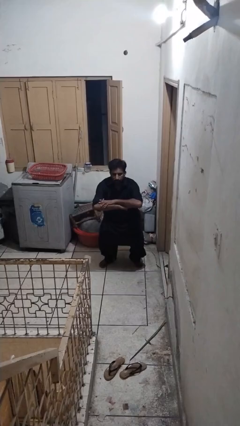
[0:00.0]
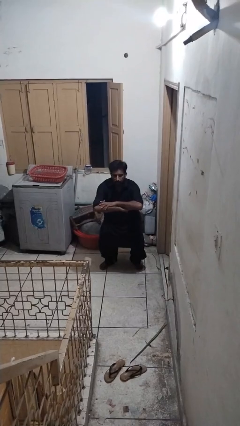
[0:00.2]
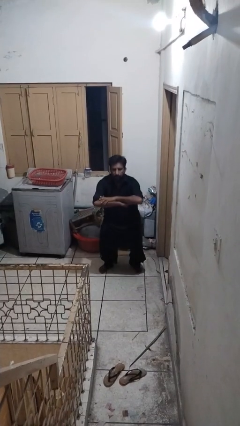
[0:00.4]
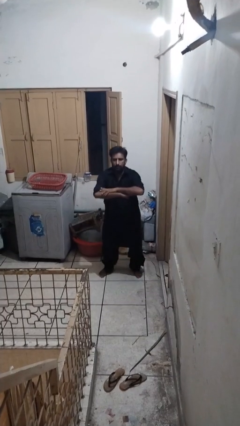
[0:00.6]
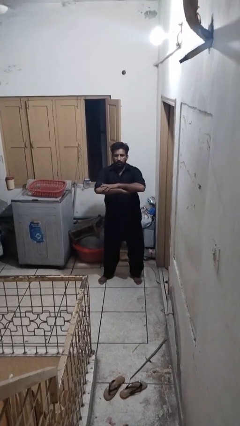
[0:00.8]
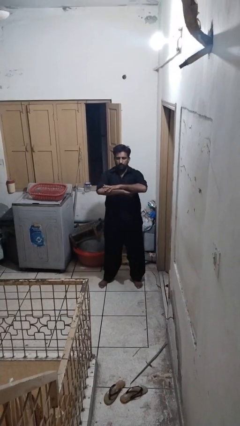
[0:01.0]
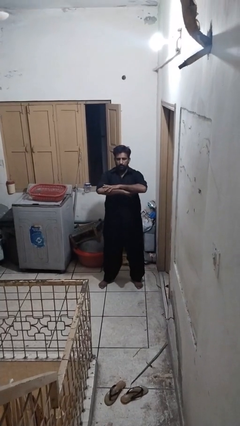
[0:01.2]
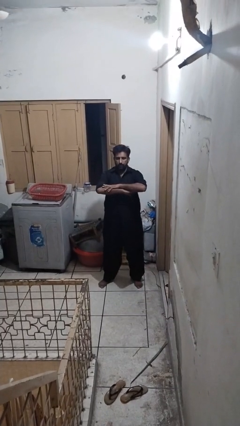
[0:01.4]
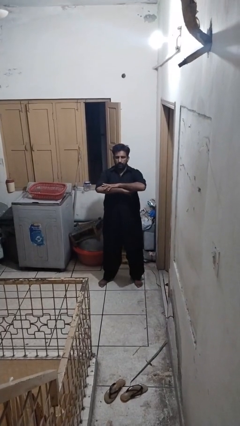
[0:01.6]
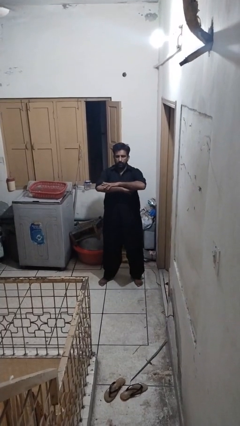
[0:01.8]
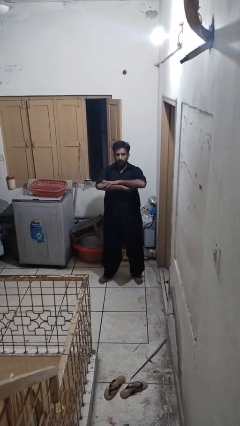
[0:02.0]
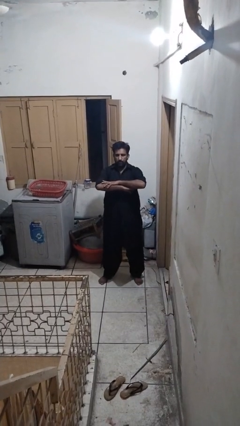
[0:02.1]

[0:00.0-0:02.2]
person stands up

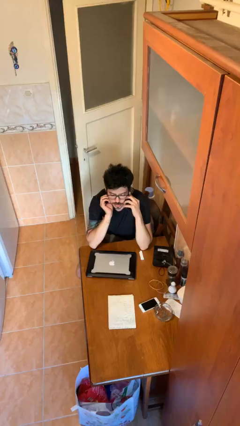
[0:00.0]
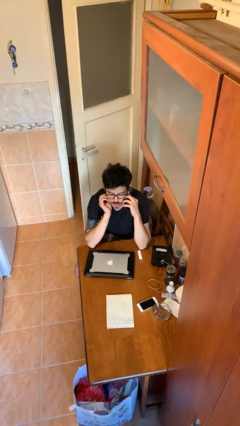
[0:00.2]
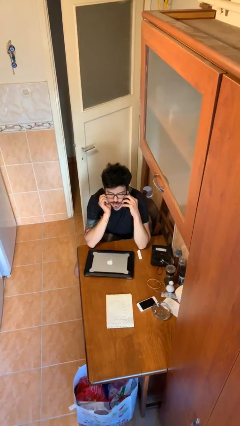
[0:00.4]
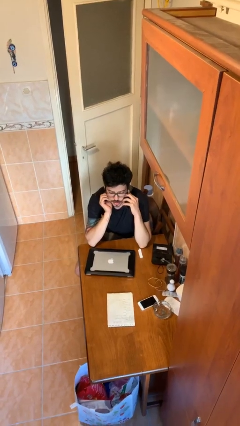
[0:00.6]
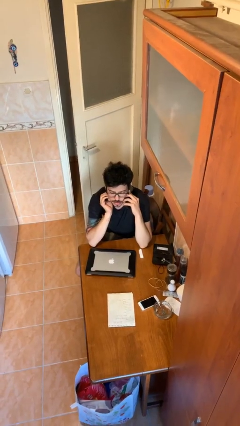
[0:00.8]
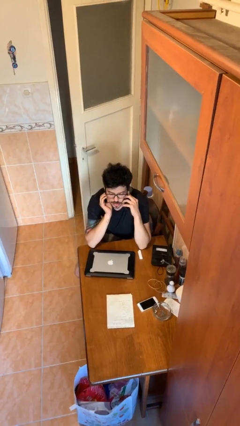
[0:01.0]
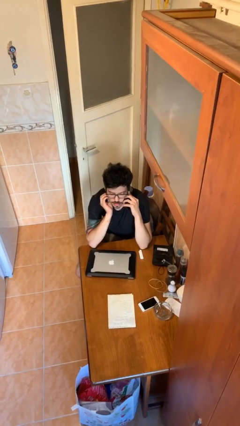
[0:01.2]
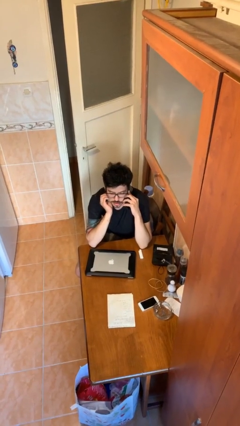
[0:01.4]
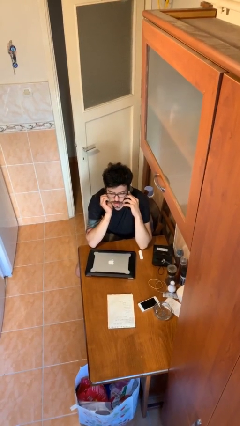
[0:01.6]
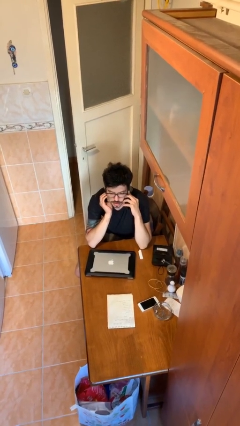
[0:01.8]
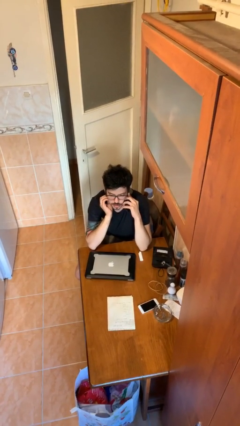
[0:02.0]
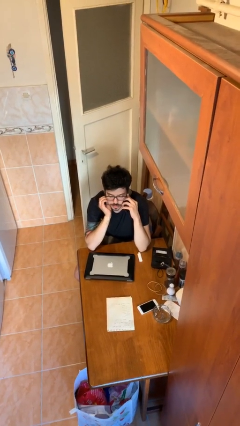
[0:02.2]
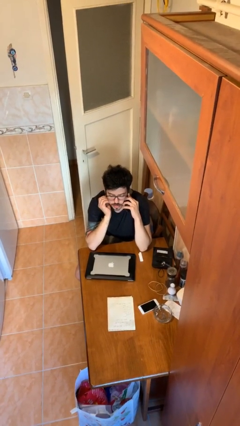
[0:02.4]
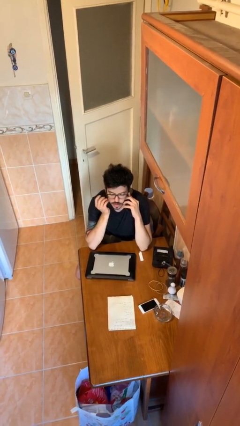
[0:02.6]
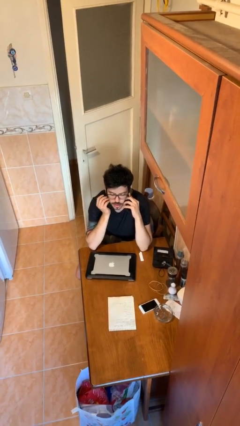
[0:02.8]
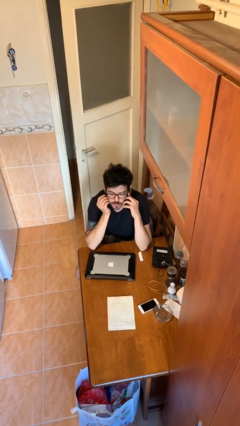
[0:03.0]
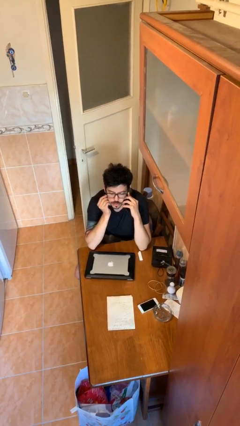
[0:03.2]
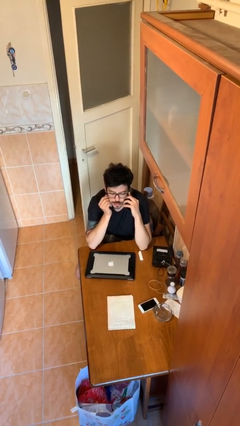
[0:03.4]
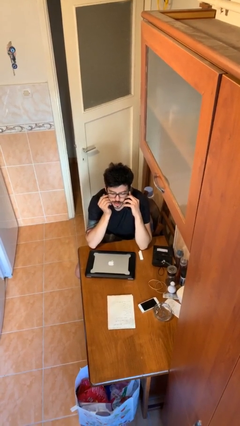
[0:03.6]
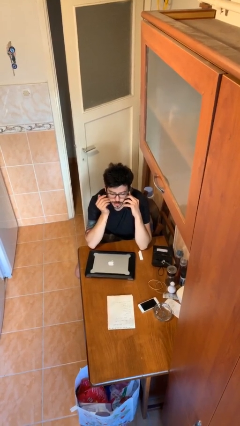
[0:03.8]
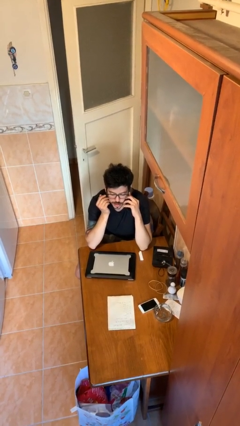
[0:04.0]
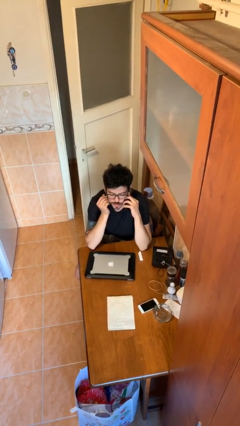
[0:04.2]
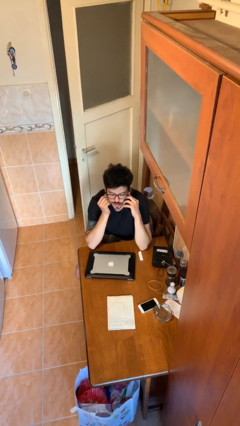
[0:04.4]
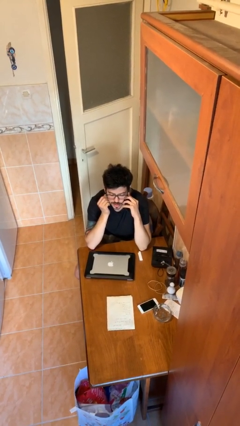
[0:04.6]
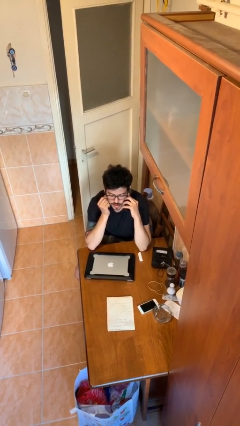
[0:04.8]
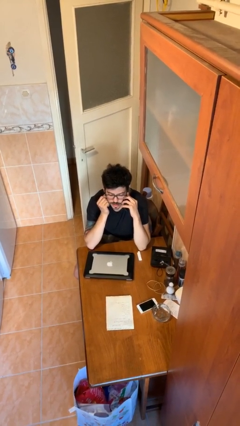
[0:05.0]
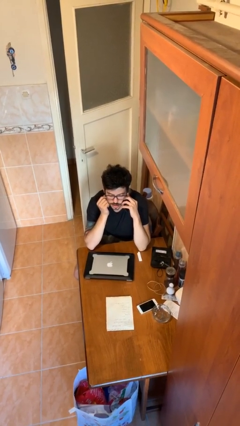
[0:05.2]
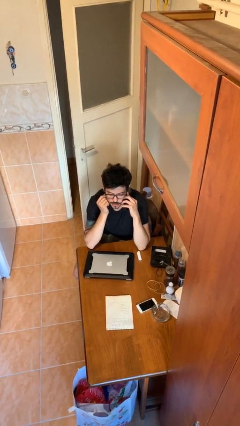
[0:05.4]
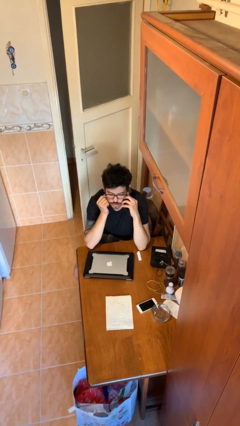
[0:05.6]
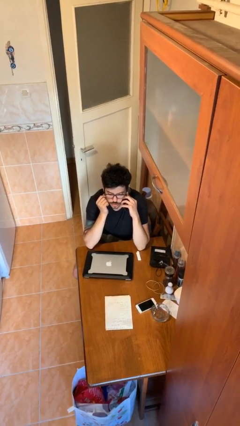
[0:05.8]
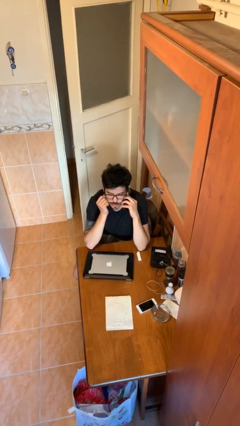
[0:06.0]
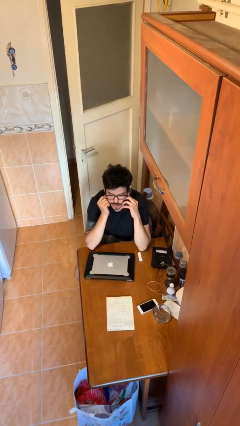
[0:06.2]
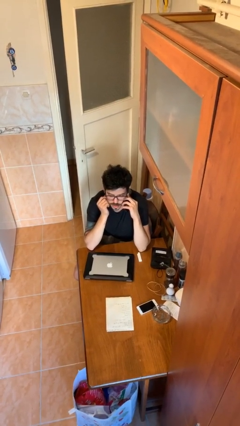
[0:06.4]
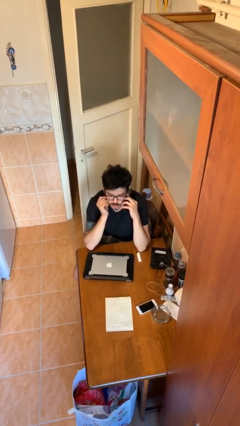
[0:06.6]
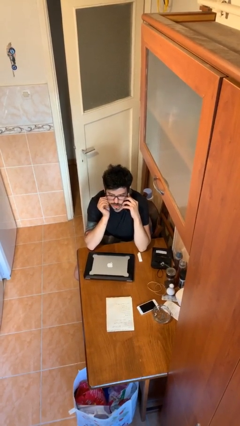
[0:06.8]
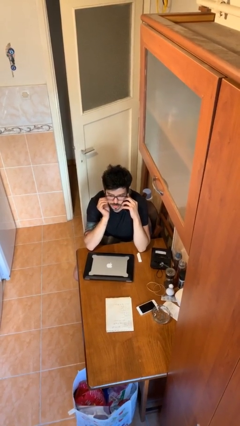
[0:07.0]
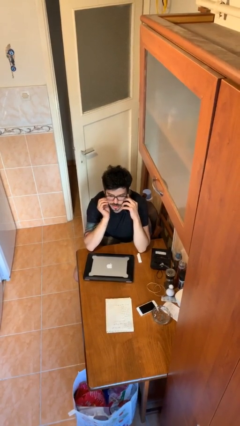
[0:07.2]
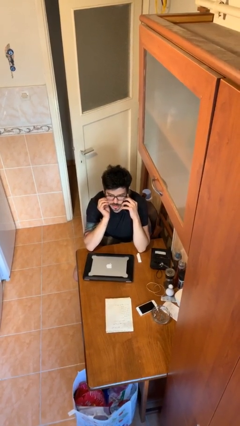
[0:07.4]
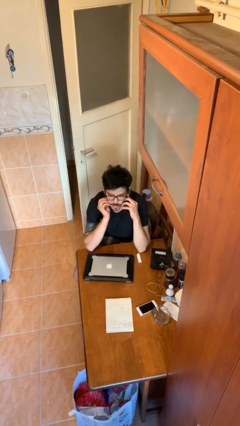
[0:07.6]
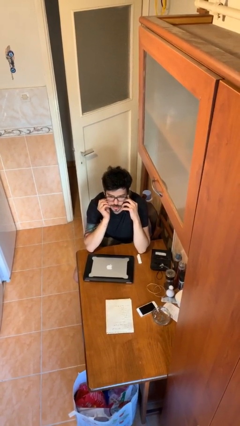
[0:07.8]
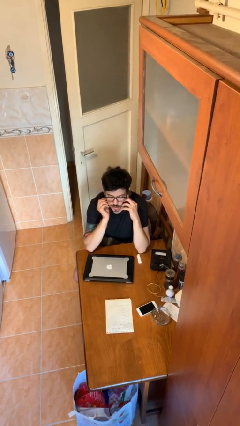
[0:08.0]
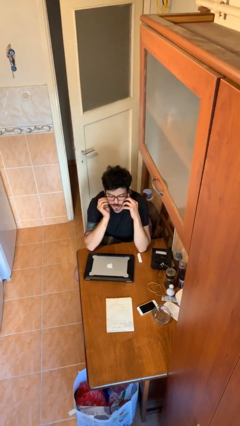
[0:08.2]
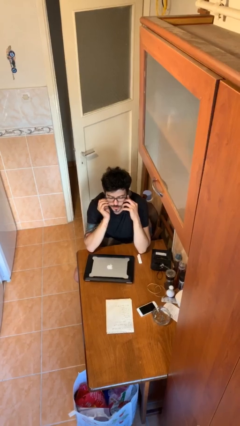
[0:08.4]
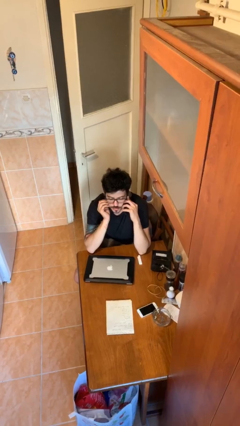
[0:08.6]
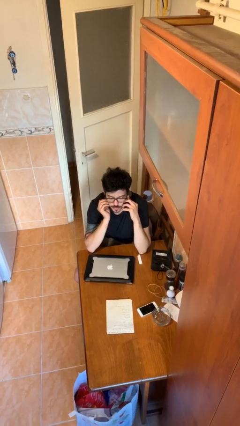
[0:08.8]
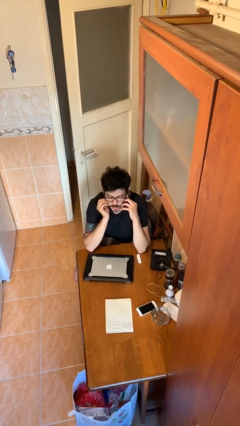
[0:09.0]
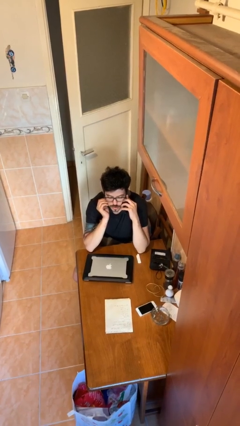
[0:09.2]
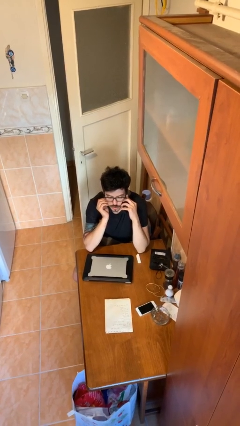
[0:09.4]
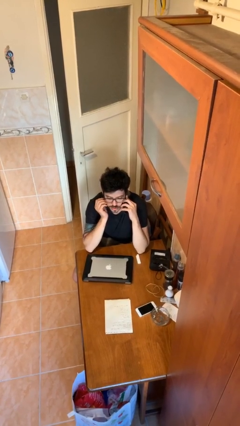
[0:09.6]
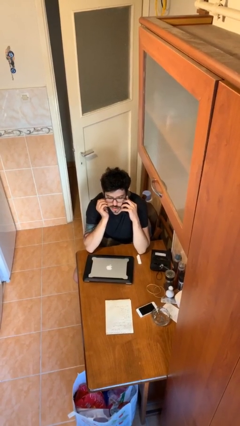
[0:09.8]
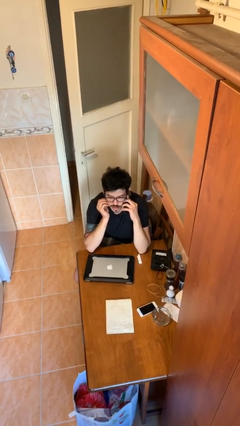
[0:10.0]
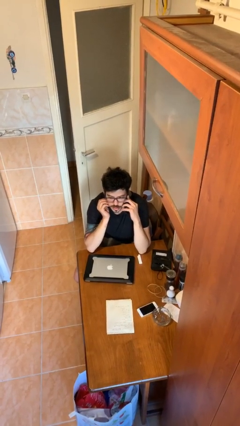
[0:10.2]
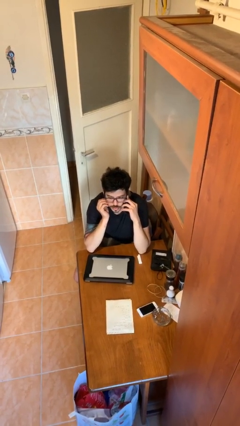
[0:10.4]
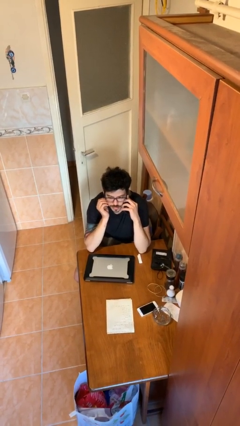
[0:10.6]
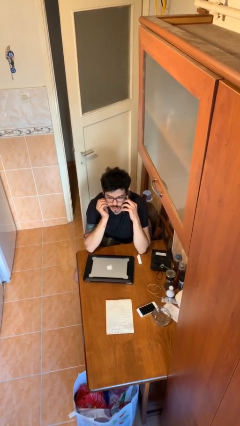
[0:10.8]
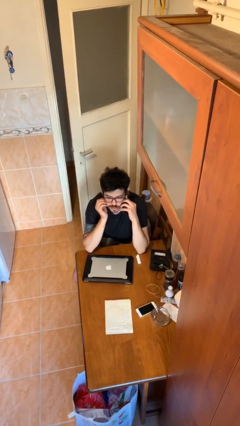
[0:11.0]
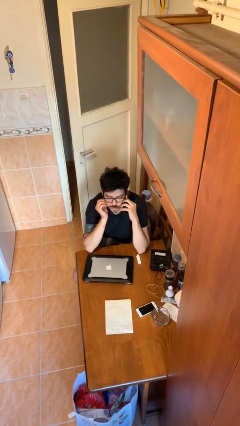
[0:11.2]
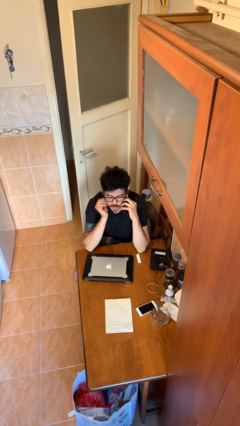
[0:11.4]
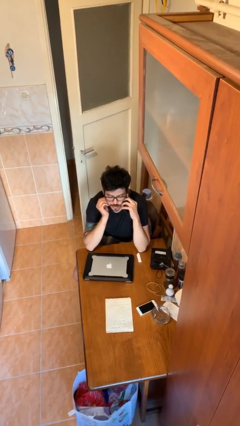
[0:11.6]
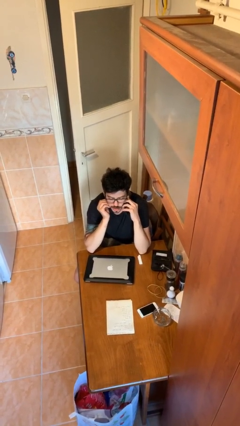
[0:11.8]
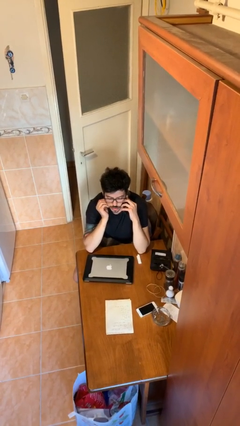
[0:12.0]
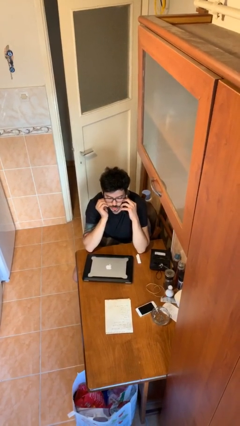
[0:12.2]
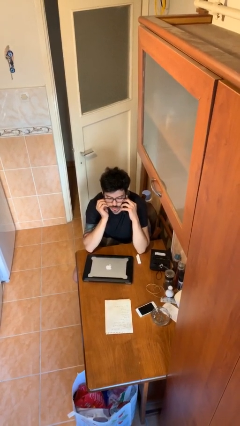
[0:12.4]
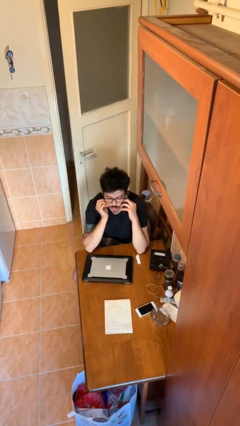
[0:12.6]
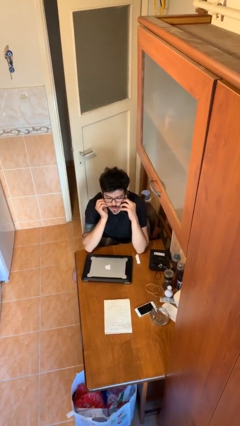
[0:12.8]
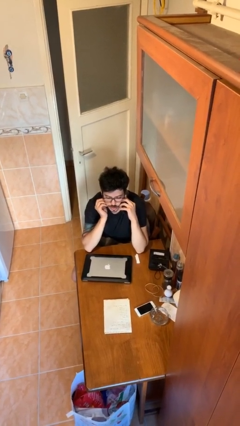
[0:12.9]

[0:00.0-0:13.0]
person talks on phone

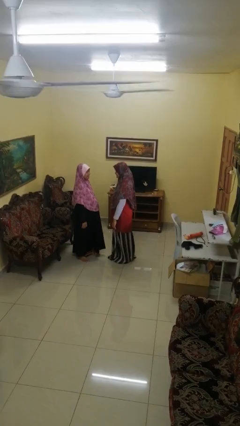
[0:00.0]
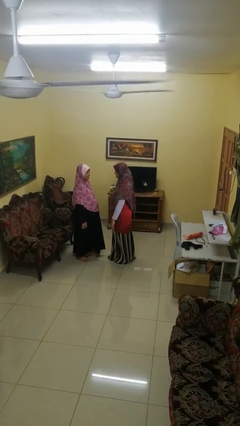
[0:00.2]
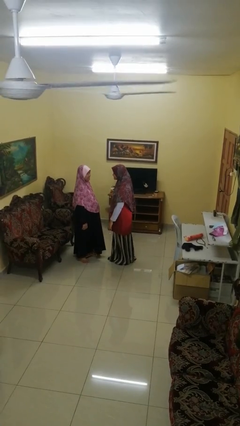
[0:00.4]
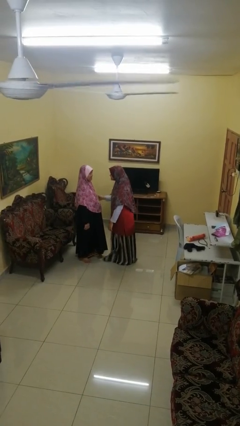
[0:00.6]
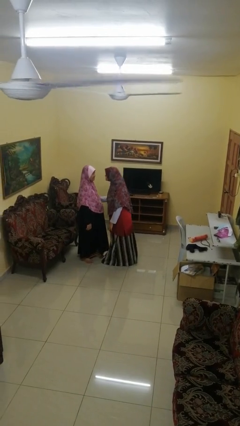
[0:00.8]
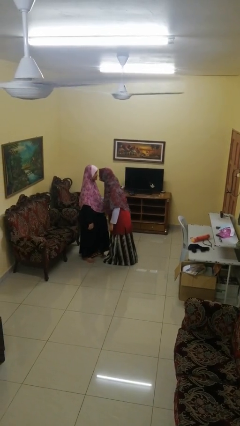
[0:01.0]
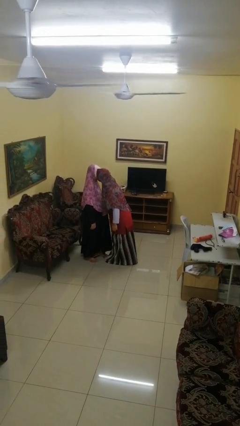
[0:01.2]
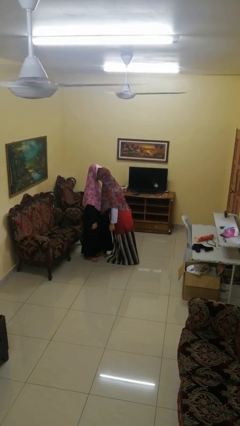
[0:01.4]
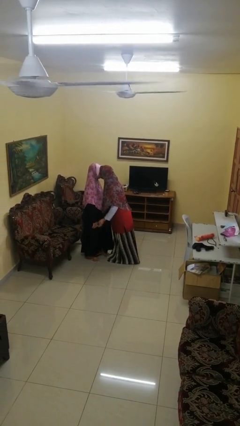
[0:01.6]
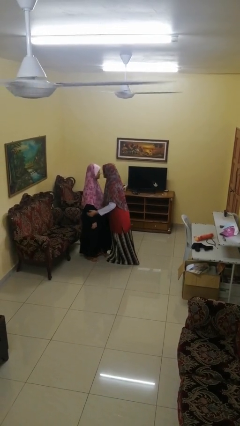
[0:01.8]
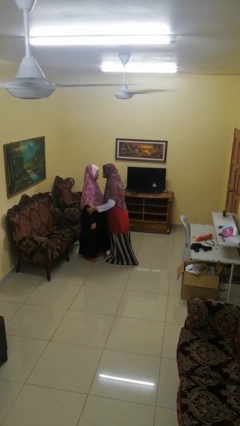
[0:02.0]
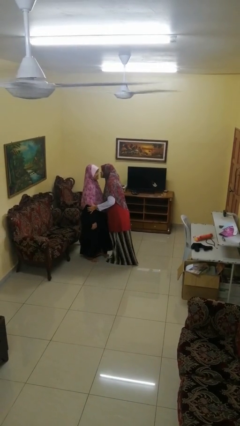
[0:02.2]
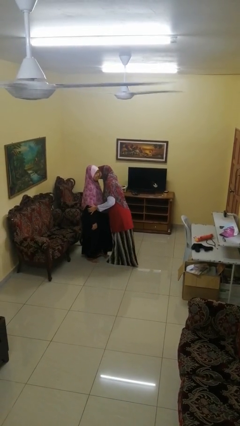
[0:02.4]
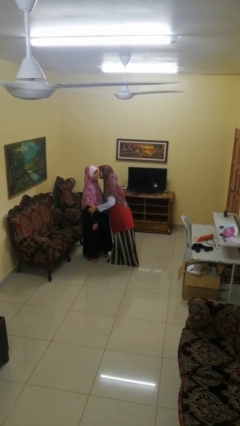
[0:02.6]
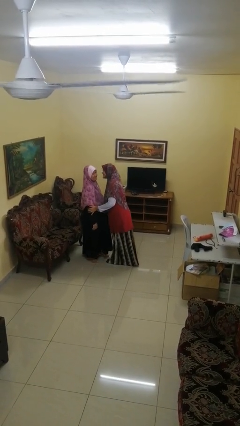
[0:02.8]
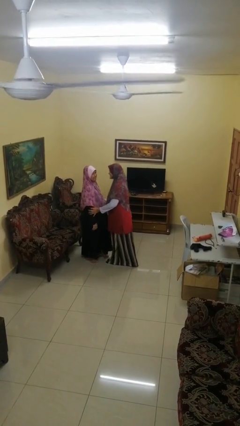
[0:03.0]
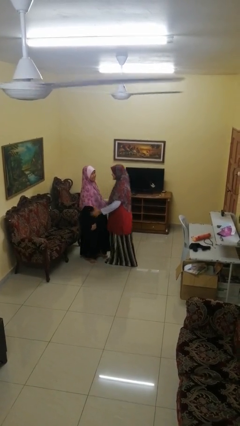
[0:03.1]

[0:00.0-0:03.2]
person kisses cheek of person
